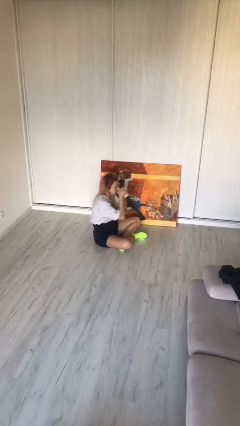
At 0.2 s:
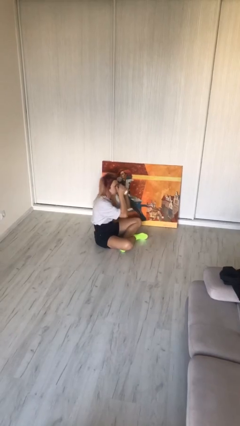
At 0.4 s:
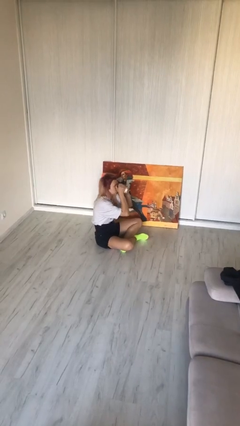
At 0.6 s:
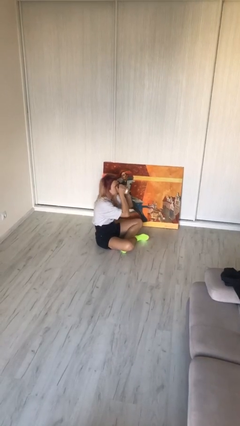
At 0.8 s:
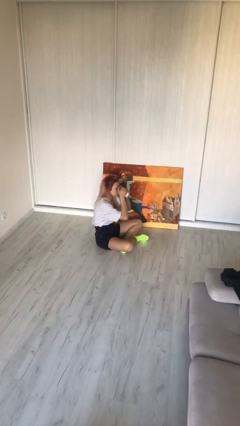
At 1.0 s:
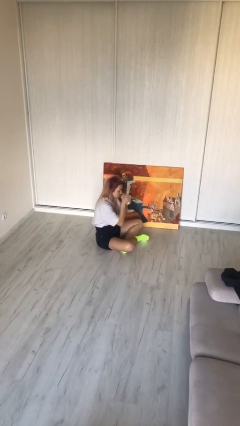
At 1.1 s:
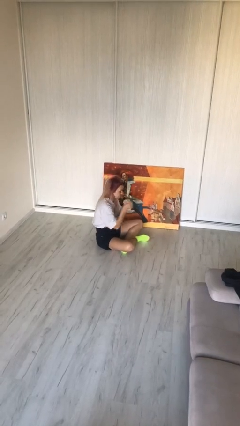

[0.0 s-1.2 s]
person drinks from mug

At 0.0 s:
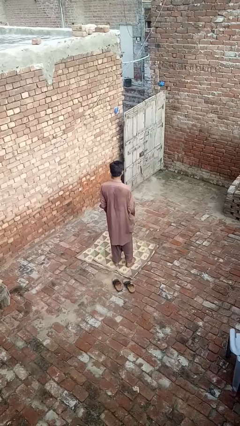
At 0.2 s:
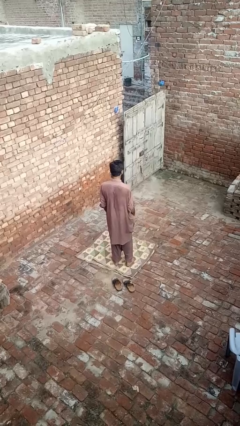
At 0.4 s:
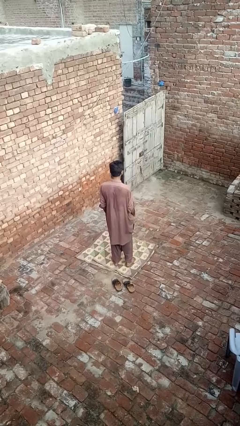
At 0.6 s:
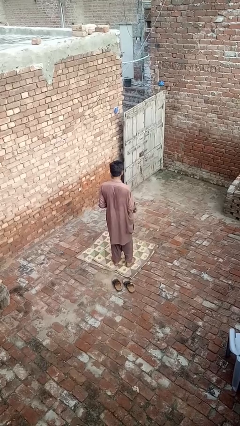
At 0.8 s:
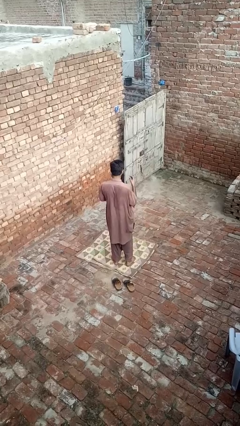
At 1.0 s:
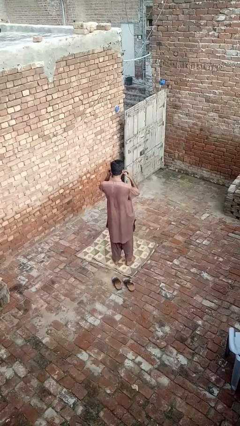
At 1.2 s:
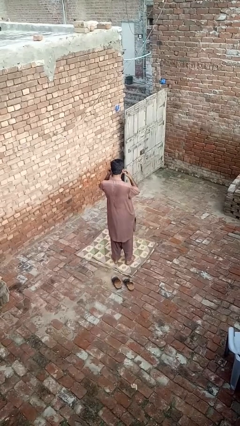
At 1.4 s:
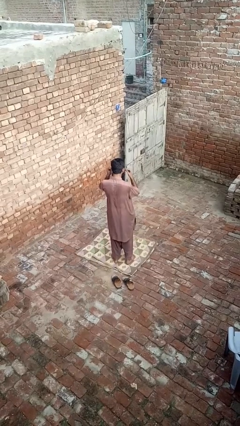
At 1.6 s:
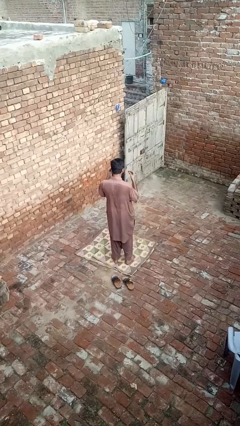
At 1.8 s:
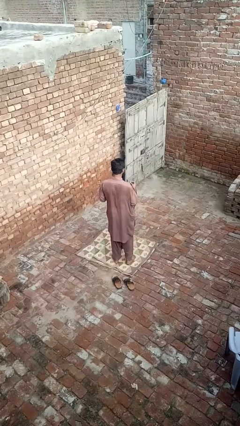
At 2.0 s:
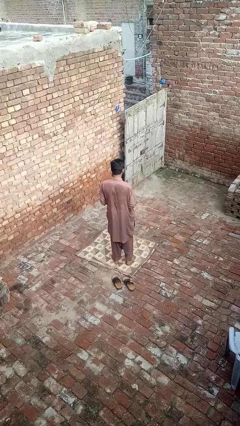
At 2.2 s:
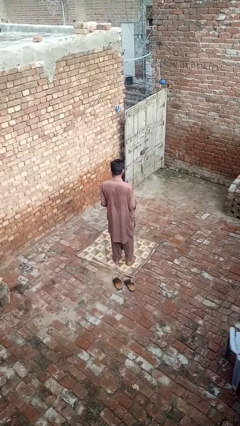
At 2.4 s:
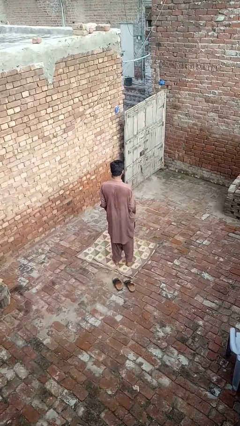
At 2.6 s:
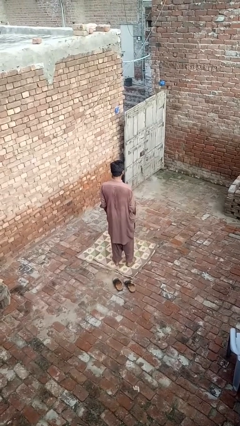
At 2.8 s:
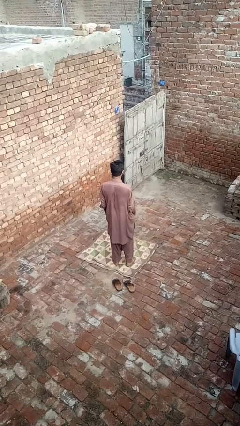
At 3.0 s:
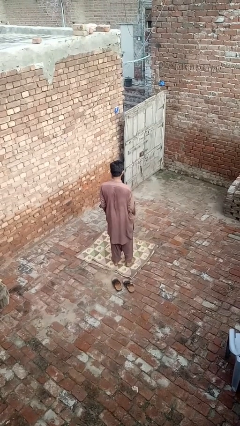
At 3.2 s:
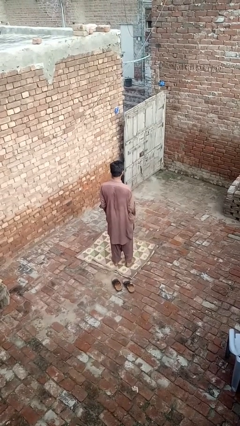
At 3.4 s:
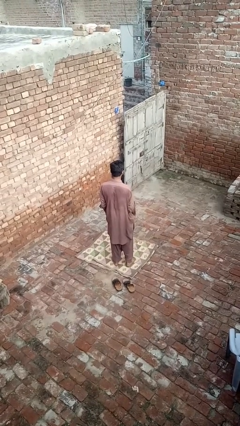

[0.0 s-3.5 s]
person takes off headphones

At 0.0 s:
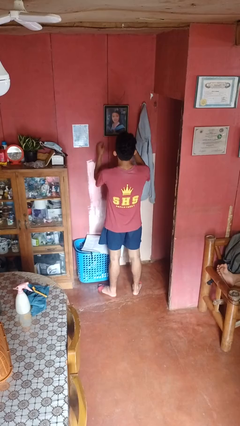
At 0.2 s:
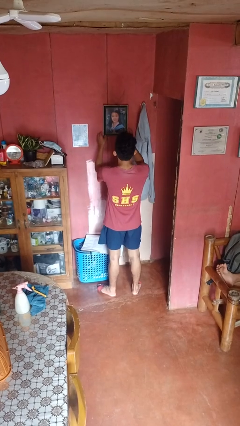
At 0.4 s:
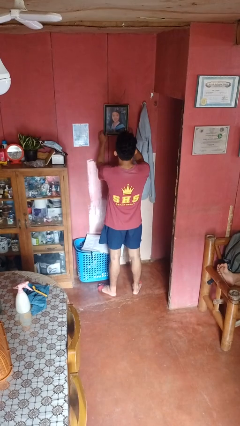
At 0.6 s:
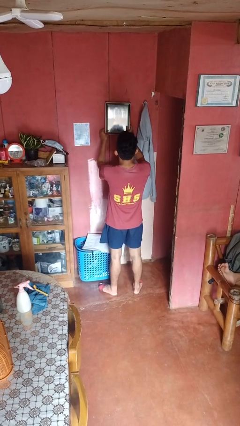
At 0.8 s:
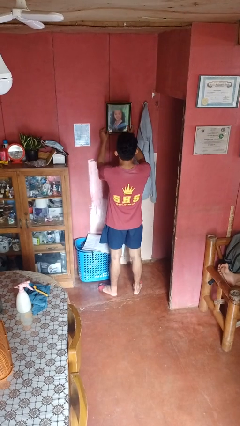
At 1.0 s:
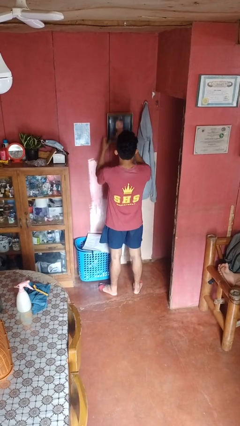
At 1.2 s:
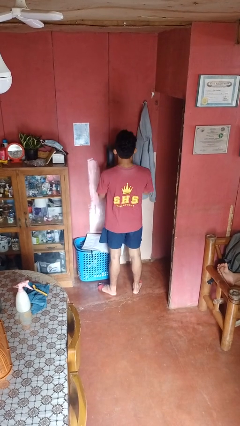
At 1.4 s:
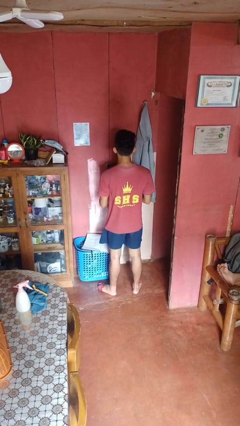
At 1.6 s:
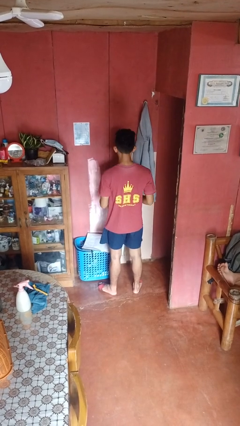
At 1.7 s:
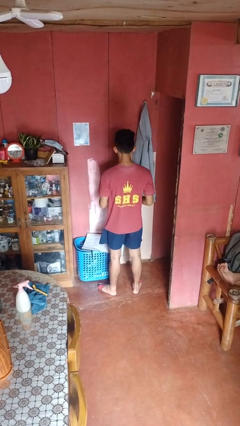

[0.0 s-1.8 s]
person takes down picture frame

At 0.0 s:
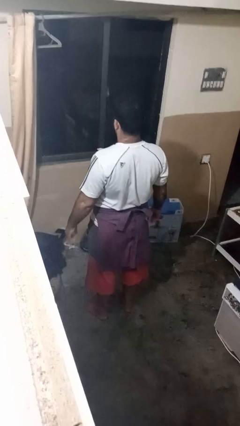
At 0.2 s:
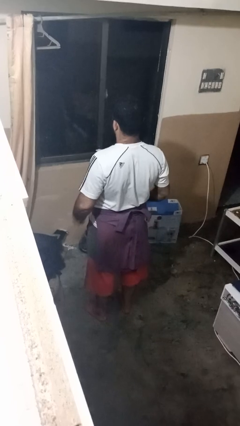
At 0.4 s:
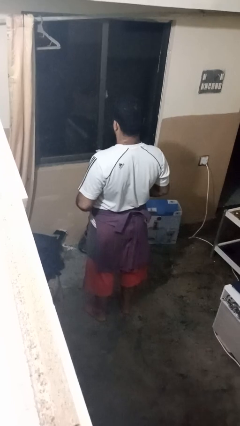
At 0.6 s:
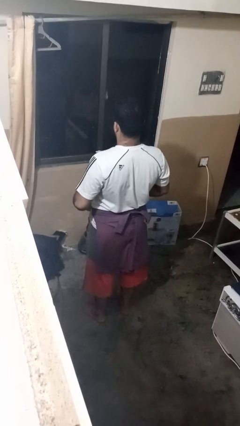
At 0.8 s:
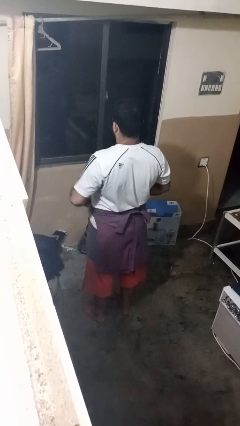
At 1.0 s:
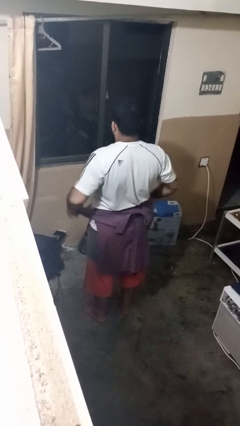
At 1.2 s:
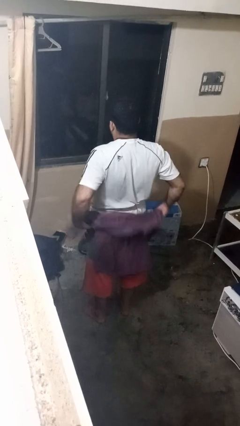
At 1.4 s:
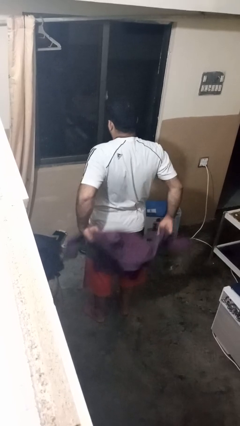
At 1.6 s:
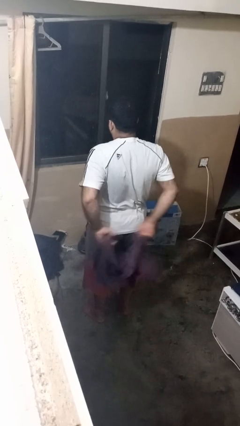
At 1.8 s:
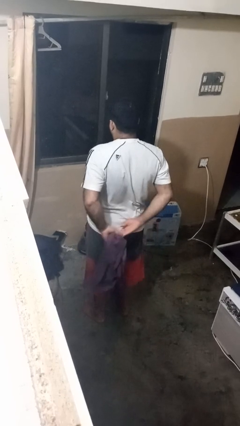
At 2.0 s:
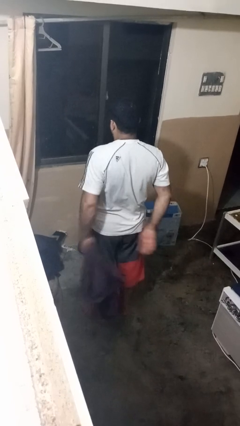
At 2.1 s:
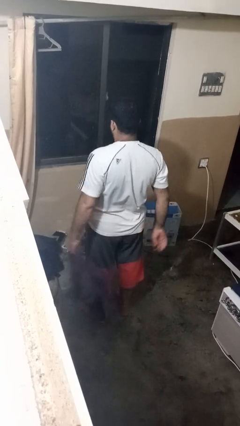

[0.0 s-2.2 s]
person unties jacket around waist

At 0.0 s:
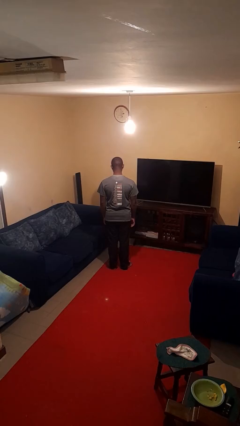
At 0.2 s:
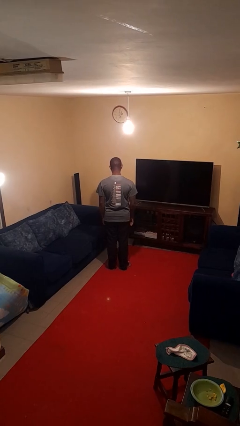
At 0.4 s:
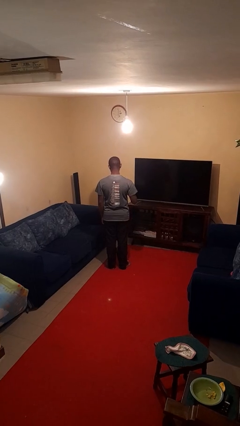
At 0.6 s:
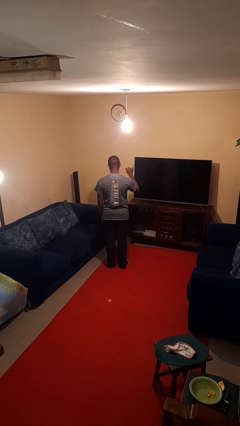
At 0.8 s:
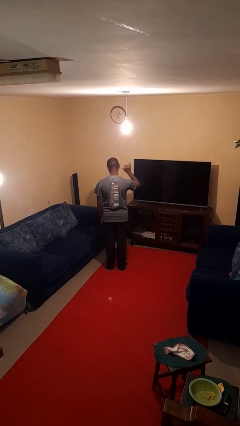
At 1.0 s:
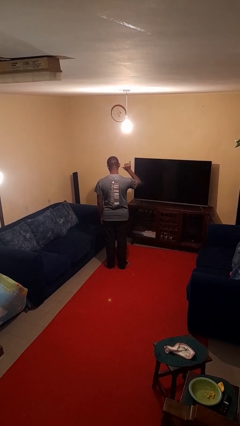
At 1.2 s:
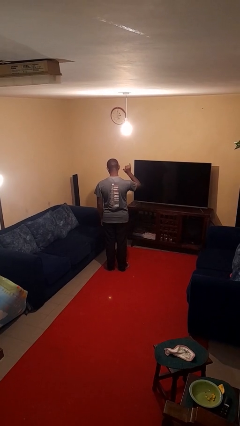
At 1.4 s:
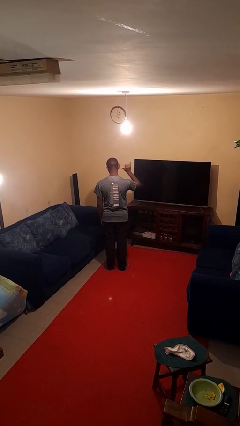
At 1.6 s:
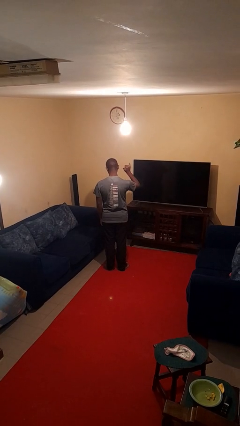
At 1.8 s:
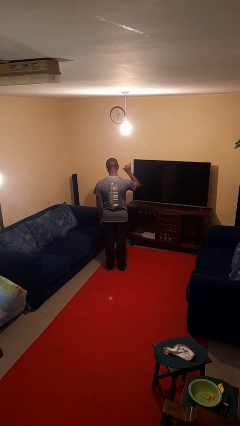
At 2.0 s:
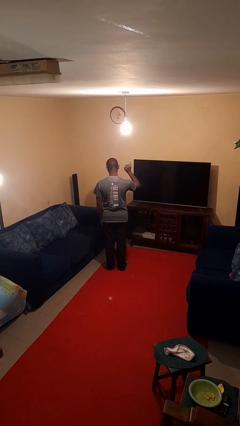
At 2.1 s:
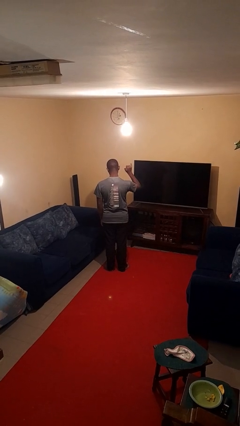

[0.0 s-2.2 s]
person gestures hang loose

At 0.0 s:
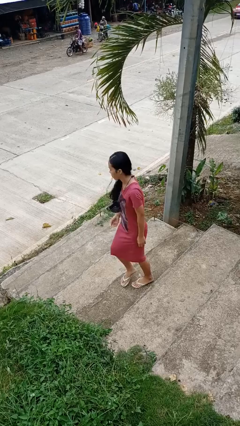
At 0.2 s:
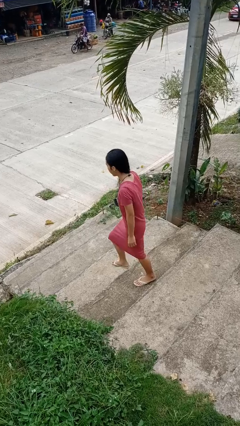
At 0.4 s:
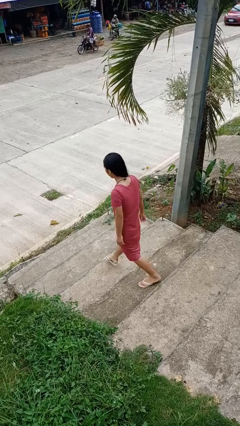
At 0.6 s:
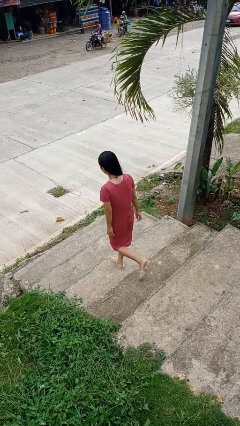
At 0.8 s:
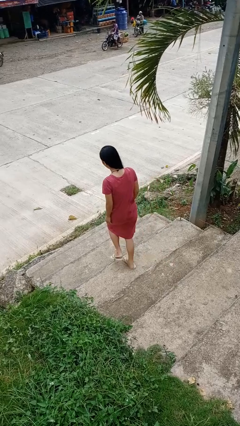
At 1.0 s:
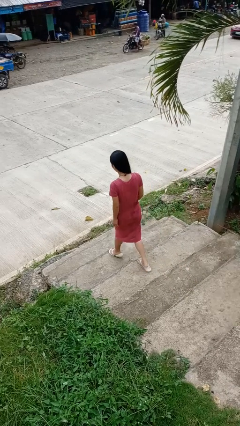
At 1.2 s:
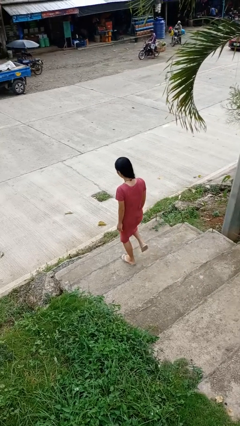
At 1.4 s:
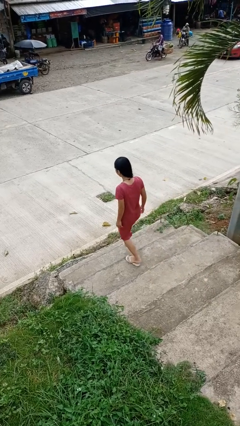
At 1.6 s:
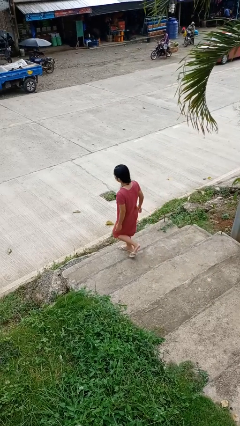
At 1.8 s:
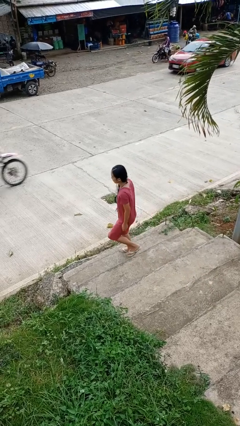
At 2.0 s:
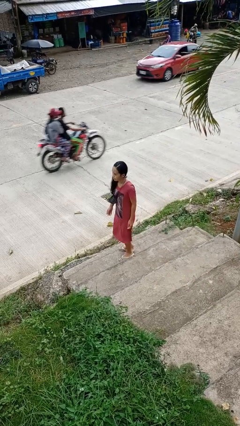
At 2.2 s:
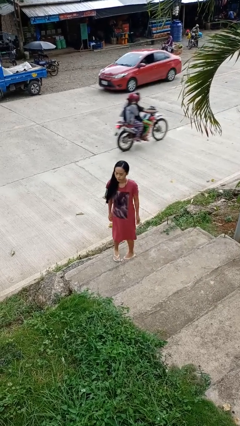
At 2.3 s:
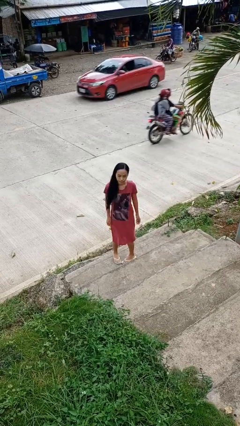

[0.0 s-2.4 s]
person climbs down stairs

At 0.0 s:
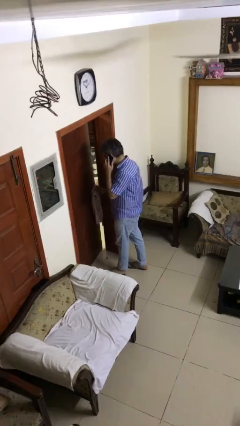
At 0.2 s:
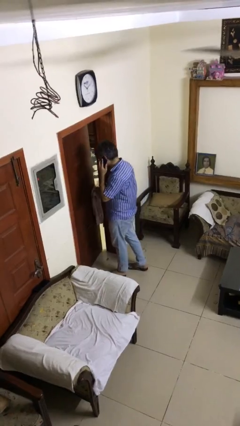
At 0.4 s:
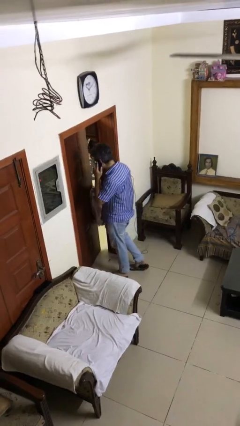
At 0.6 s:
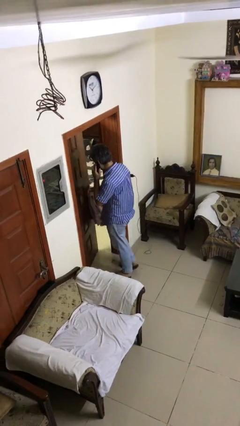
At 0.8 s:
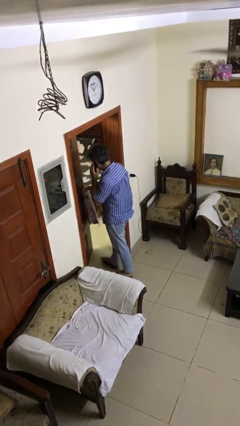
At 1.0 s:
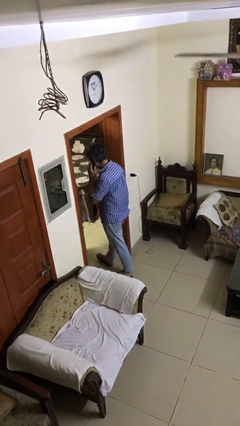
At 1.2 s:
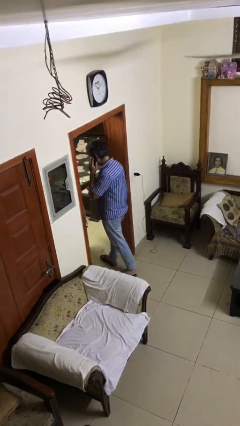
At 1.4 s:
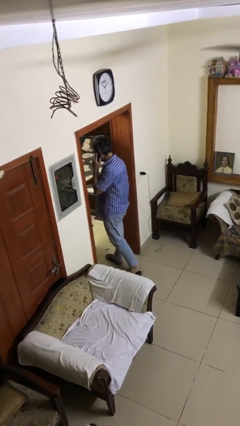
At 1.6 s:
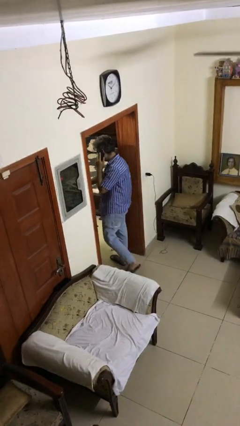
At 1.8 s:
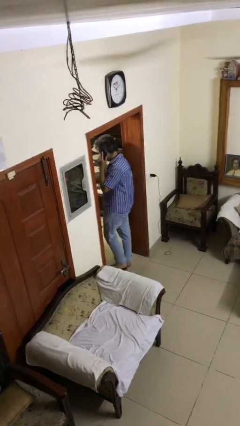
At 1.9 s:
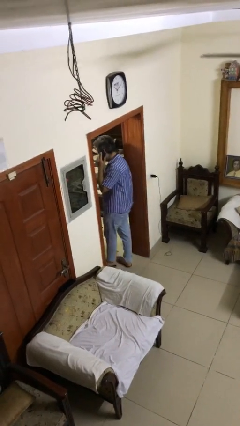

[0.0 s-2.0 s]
person opens facility door

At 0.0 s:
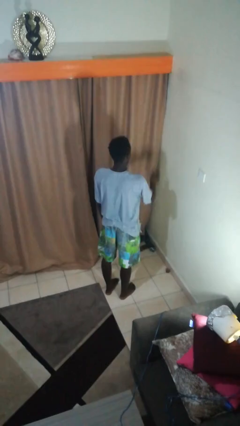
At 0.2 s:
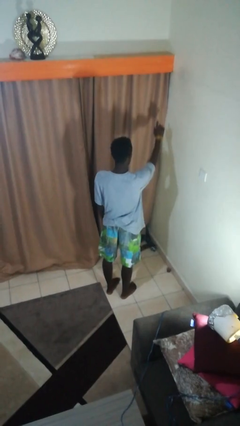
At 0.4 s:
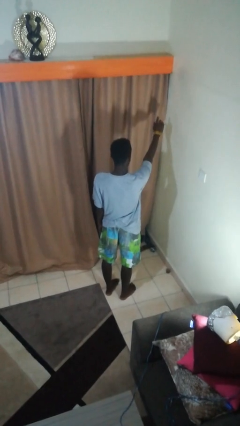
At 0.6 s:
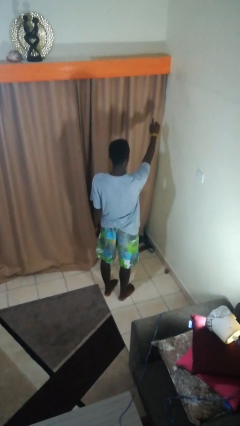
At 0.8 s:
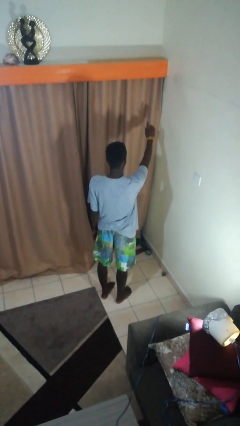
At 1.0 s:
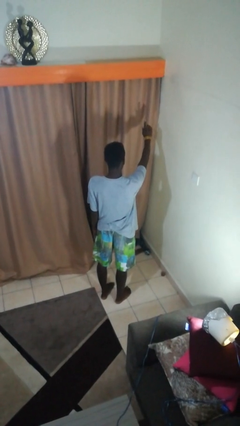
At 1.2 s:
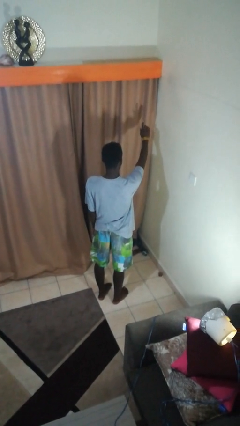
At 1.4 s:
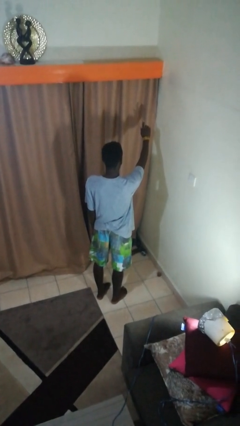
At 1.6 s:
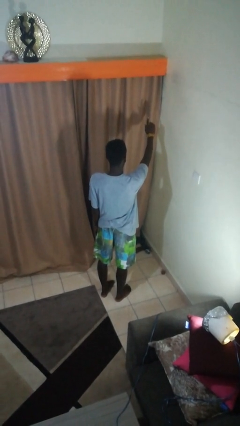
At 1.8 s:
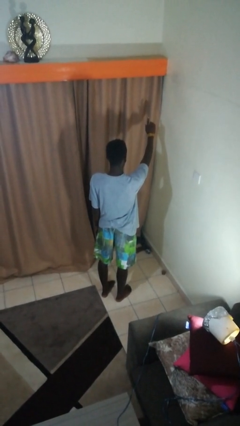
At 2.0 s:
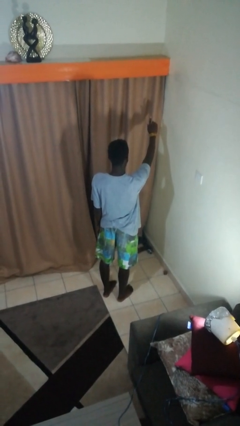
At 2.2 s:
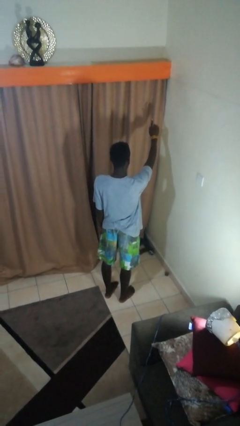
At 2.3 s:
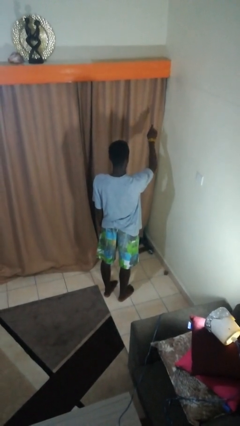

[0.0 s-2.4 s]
person gestures number one
